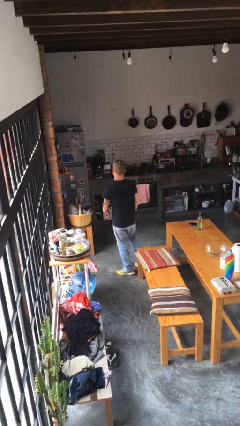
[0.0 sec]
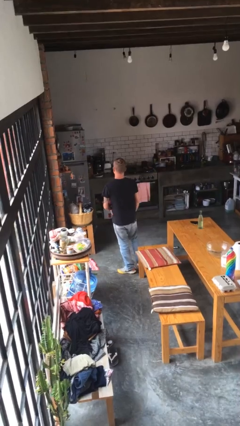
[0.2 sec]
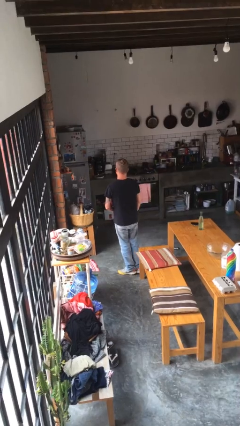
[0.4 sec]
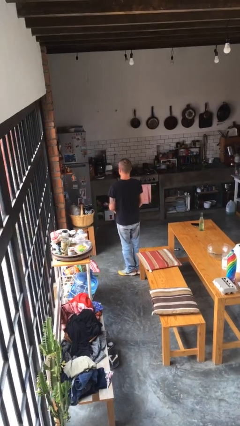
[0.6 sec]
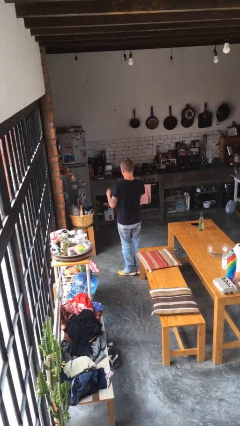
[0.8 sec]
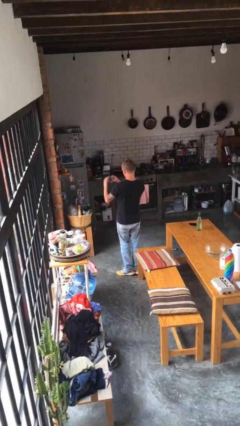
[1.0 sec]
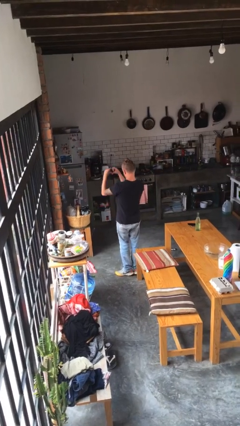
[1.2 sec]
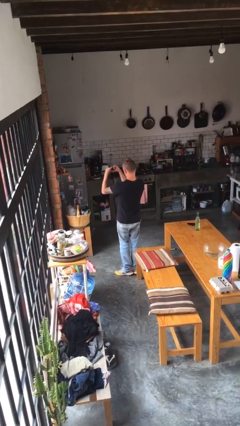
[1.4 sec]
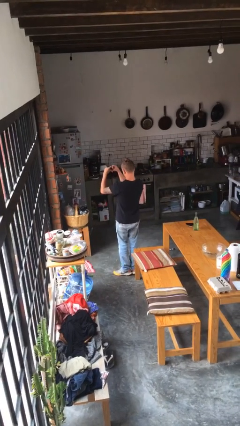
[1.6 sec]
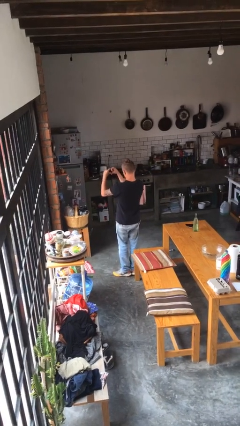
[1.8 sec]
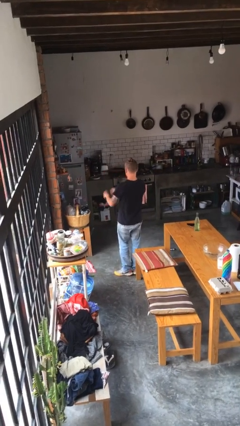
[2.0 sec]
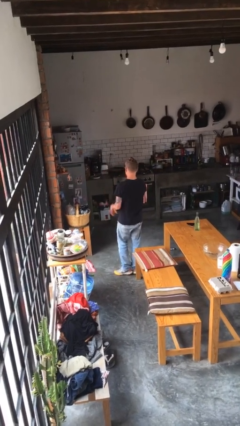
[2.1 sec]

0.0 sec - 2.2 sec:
person gestures heart

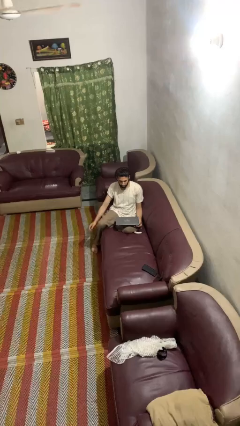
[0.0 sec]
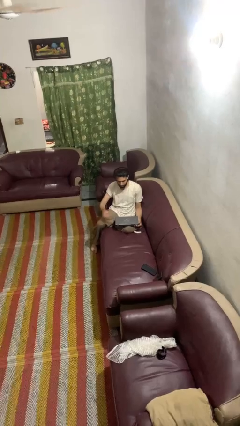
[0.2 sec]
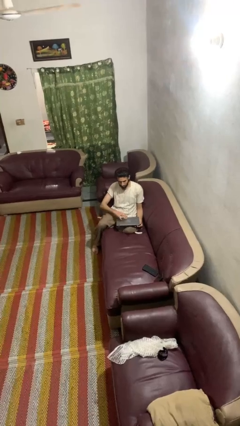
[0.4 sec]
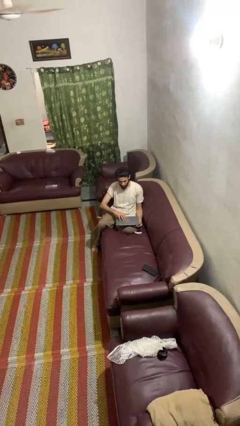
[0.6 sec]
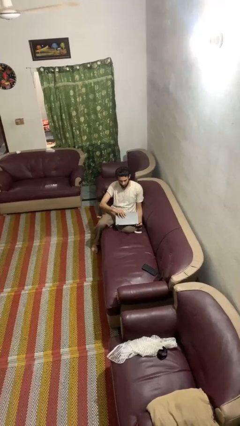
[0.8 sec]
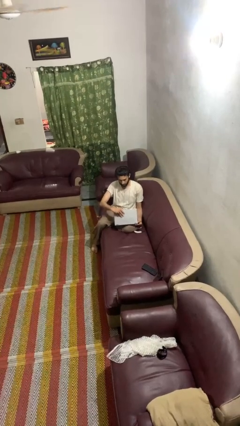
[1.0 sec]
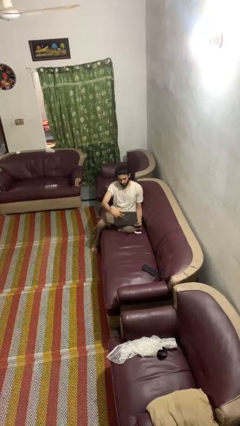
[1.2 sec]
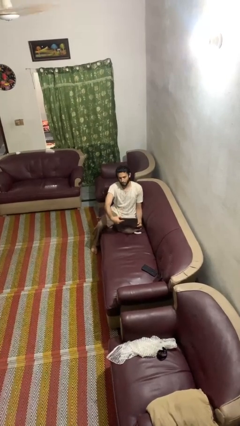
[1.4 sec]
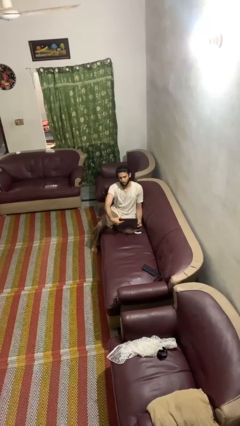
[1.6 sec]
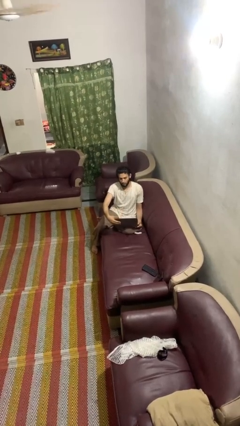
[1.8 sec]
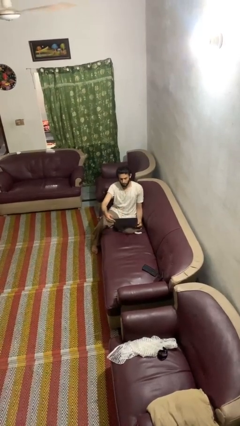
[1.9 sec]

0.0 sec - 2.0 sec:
person opens laptop

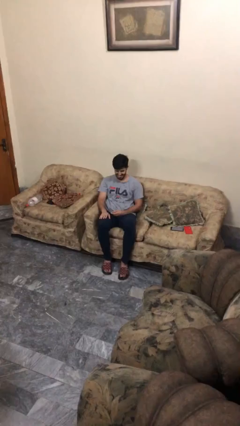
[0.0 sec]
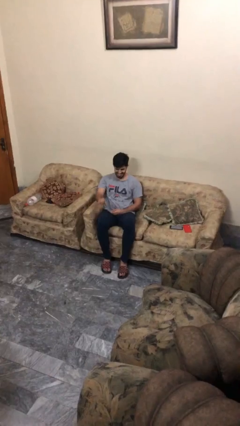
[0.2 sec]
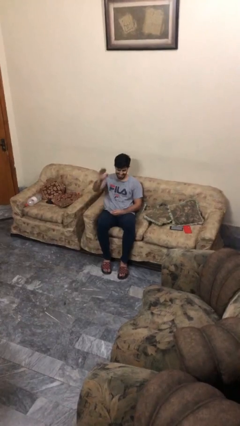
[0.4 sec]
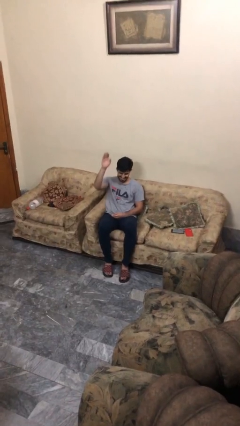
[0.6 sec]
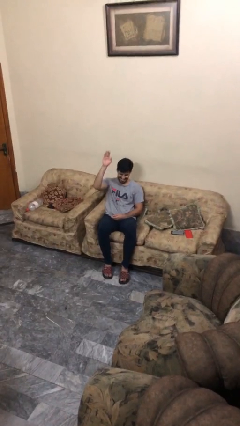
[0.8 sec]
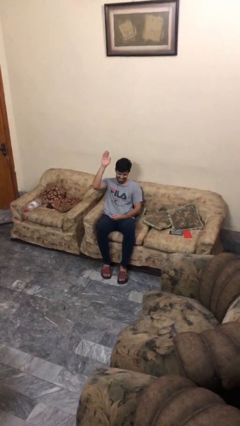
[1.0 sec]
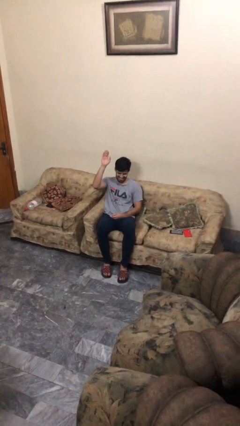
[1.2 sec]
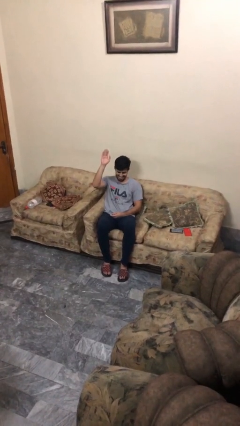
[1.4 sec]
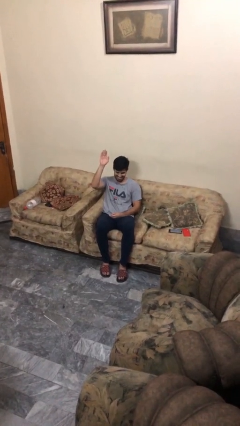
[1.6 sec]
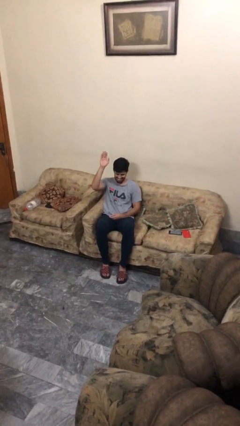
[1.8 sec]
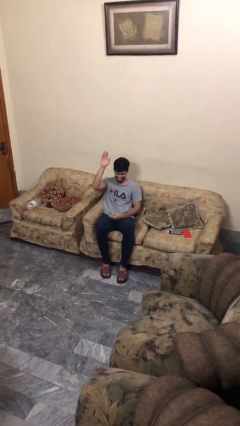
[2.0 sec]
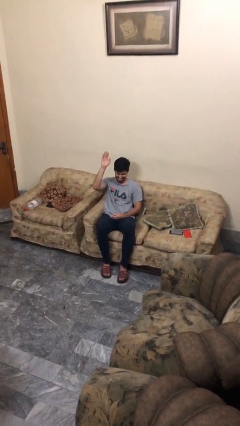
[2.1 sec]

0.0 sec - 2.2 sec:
person gestures raise hand

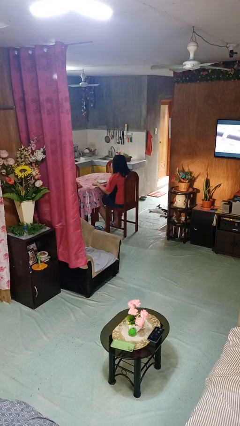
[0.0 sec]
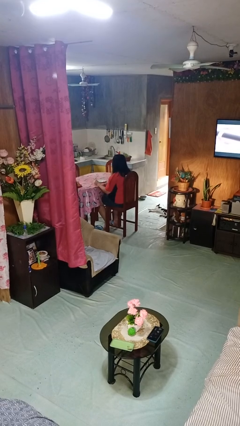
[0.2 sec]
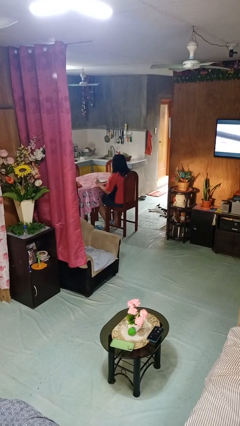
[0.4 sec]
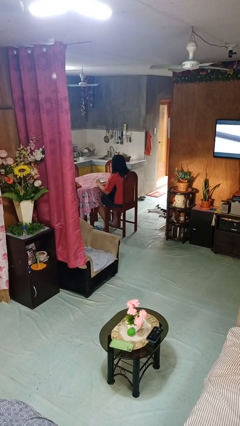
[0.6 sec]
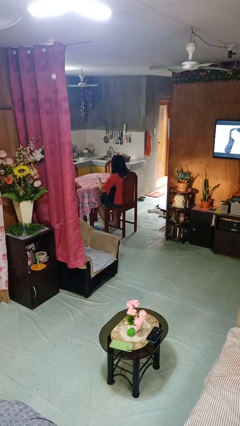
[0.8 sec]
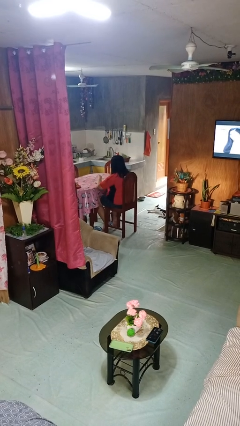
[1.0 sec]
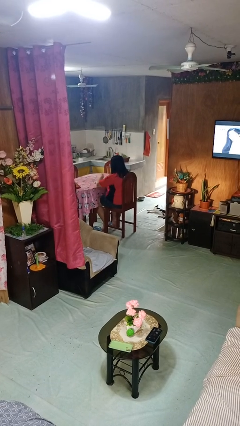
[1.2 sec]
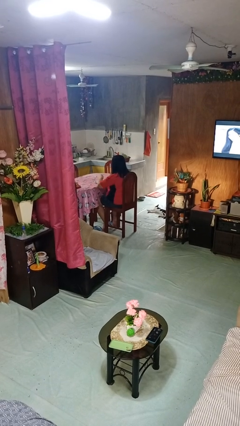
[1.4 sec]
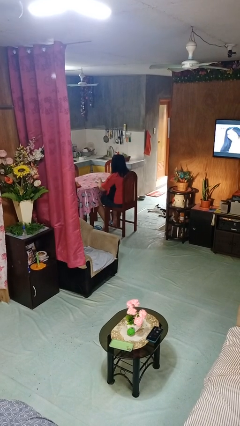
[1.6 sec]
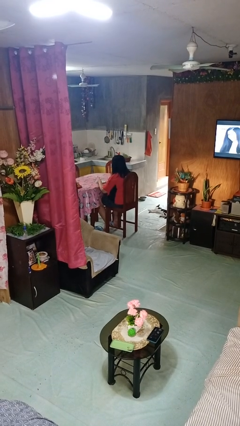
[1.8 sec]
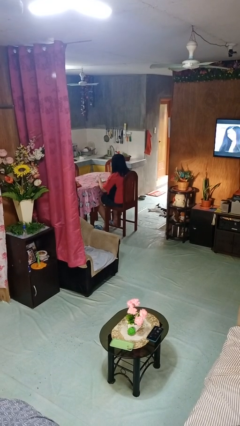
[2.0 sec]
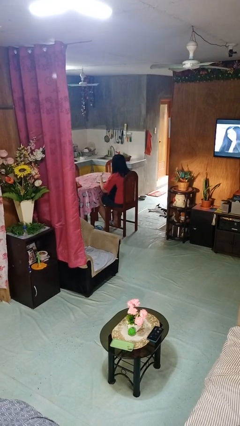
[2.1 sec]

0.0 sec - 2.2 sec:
person eats with utensil

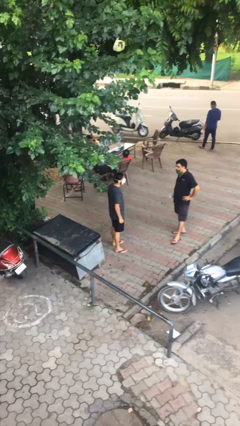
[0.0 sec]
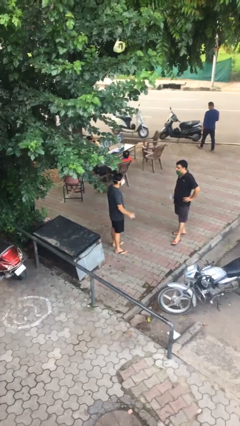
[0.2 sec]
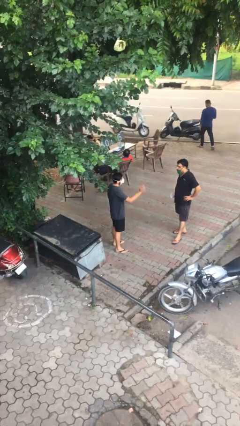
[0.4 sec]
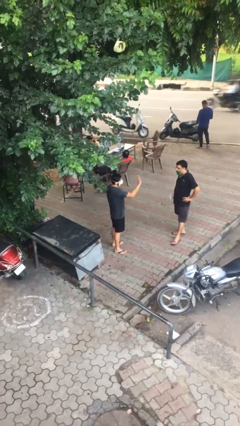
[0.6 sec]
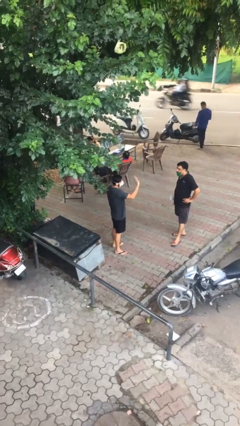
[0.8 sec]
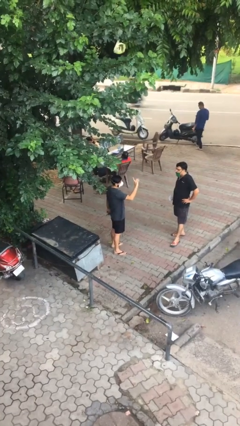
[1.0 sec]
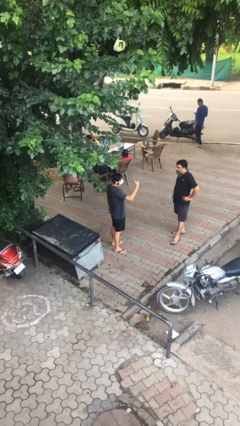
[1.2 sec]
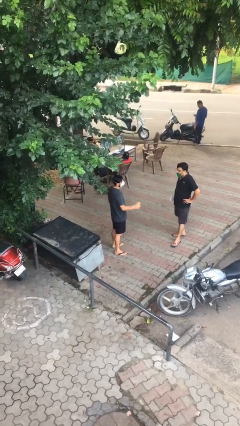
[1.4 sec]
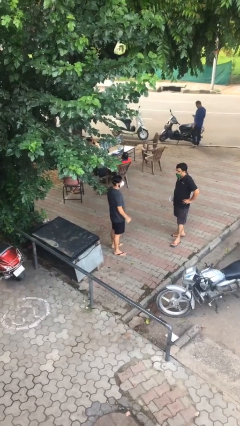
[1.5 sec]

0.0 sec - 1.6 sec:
person waves at person

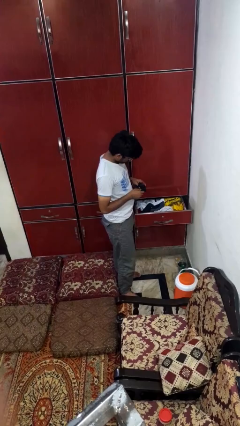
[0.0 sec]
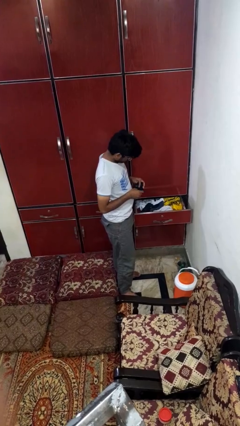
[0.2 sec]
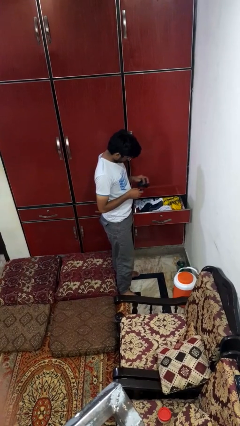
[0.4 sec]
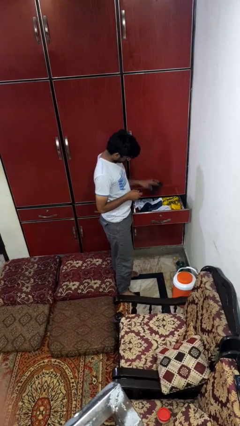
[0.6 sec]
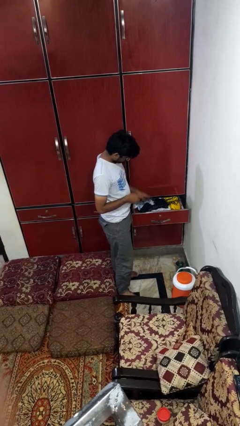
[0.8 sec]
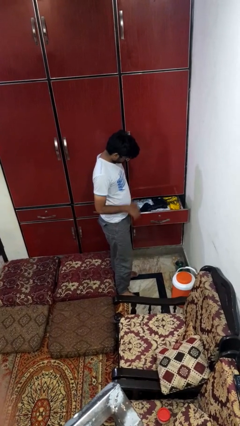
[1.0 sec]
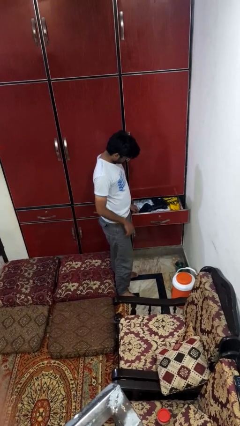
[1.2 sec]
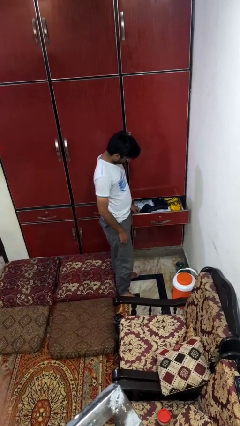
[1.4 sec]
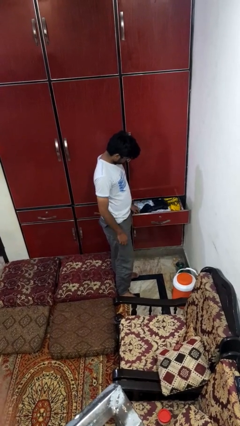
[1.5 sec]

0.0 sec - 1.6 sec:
person puts clothes into dresser

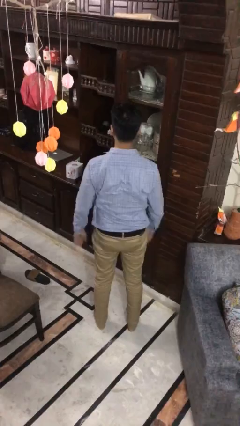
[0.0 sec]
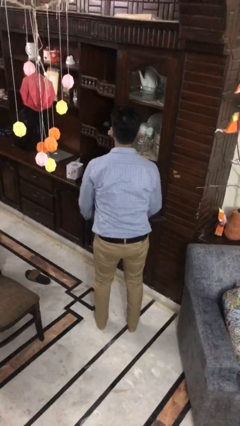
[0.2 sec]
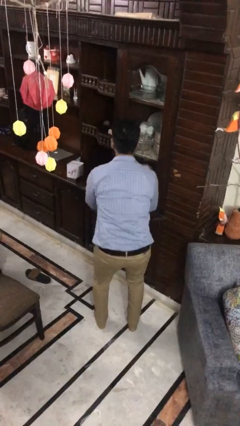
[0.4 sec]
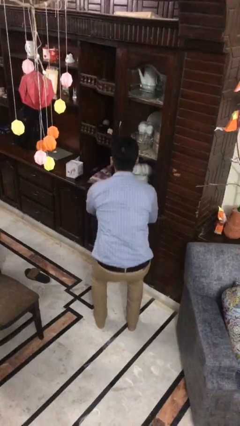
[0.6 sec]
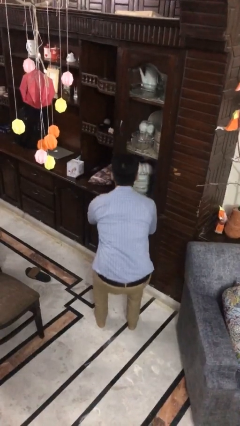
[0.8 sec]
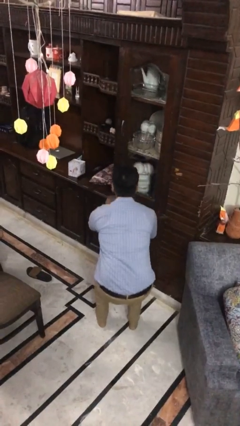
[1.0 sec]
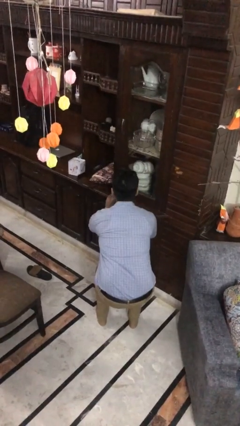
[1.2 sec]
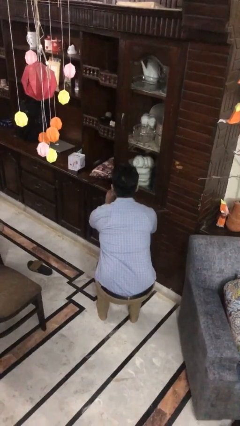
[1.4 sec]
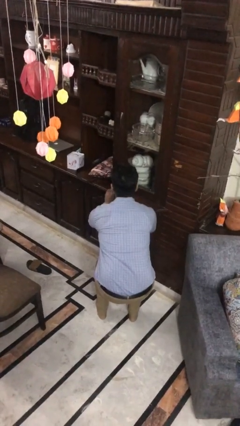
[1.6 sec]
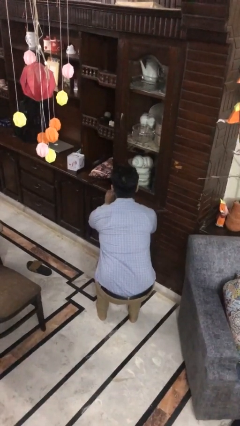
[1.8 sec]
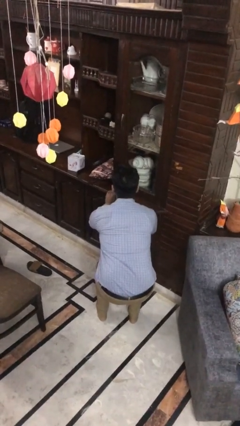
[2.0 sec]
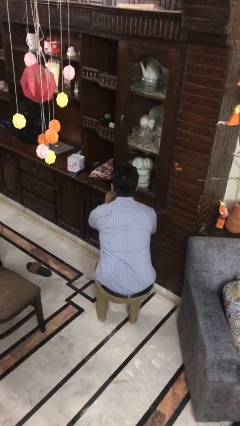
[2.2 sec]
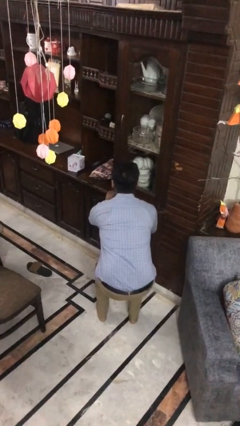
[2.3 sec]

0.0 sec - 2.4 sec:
person squats

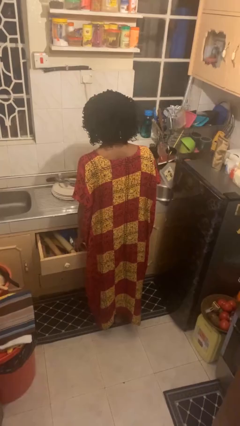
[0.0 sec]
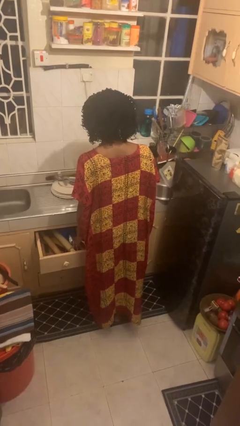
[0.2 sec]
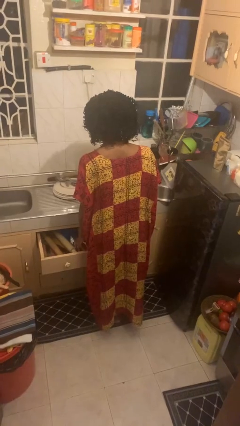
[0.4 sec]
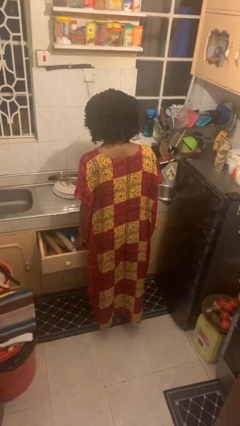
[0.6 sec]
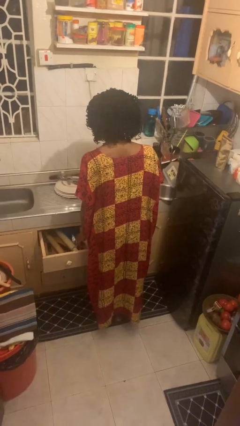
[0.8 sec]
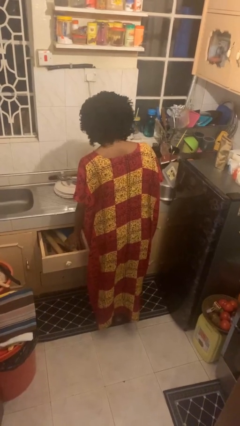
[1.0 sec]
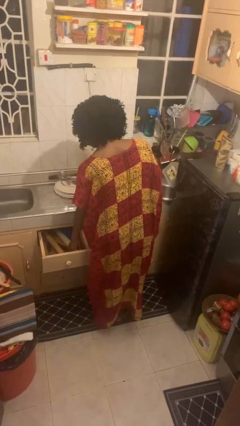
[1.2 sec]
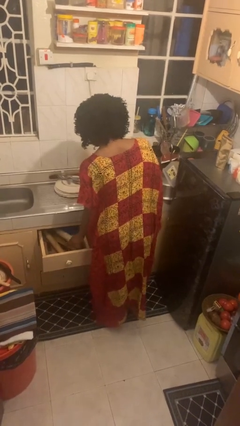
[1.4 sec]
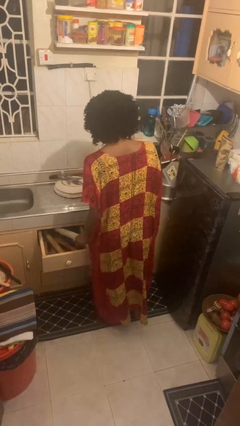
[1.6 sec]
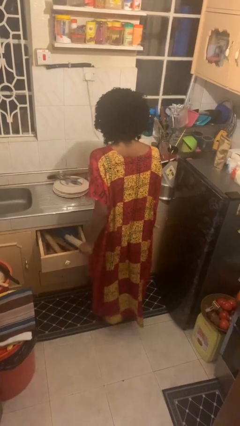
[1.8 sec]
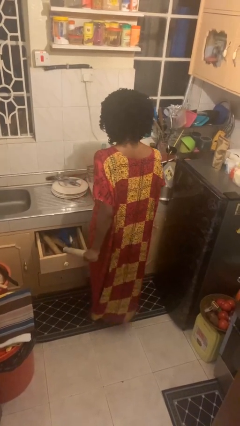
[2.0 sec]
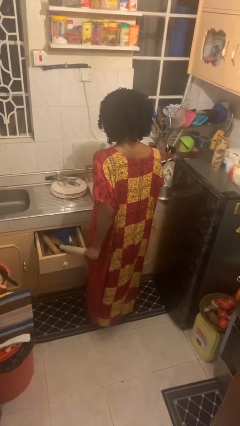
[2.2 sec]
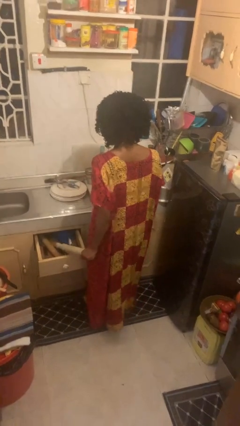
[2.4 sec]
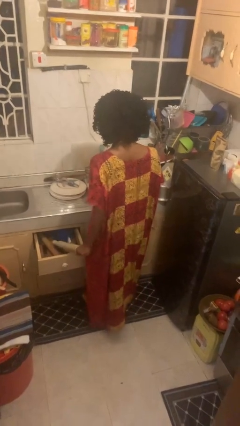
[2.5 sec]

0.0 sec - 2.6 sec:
person takes object from kitchen drawer

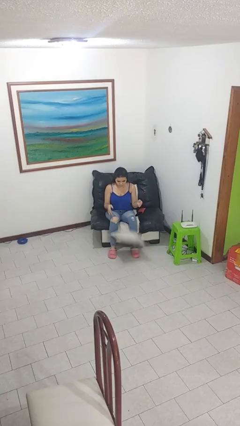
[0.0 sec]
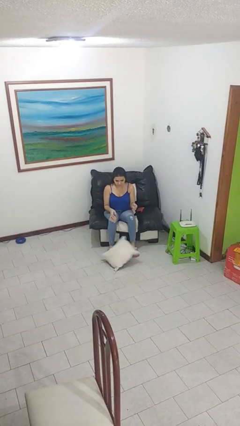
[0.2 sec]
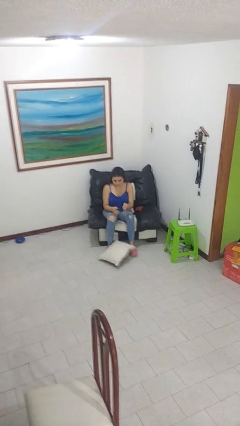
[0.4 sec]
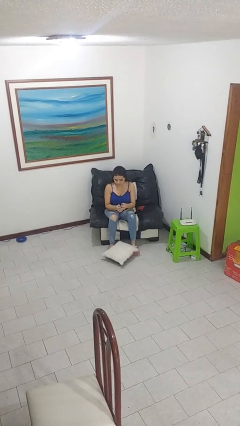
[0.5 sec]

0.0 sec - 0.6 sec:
person drops object
